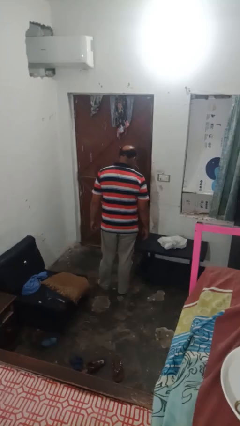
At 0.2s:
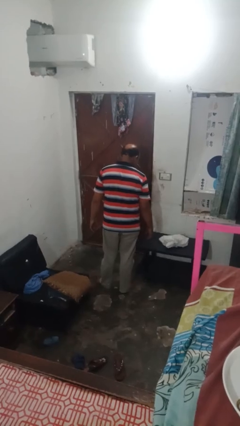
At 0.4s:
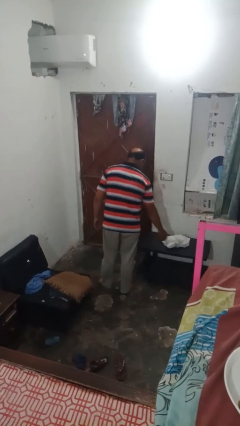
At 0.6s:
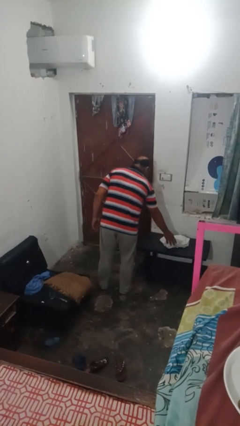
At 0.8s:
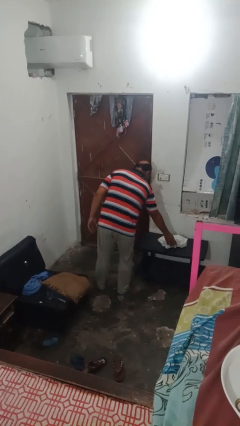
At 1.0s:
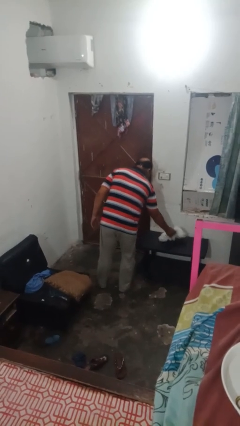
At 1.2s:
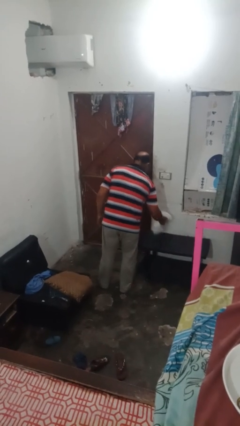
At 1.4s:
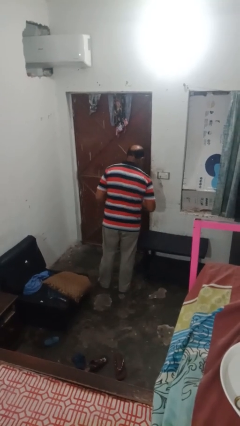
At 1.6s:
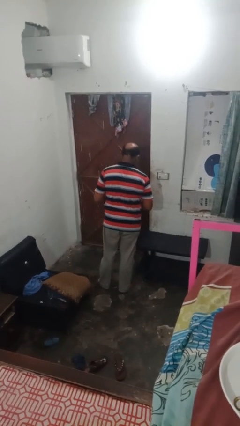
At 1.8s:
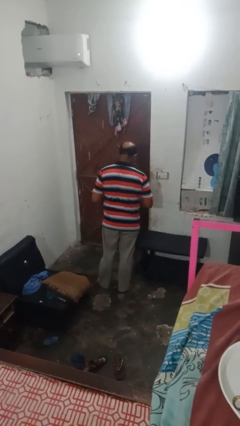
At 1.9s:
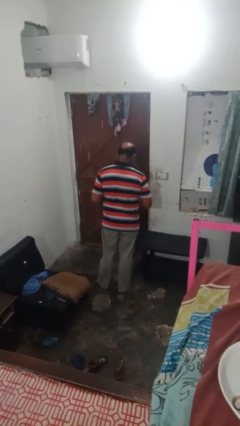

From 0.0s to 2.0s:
person picks up object from table

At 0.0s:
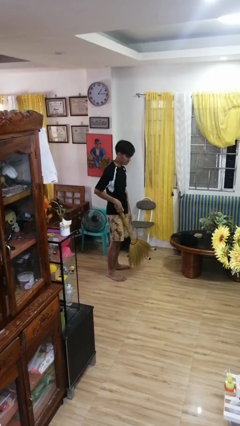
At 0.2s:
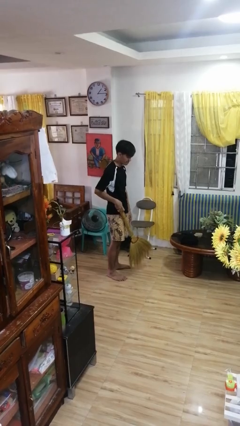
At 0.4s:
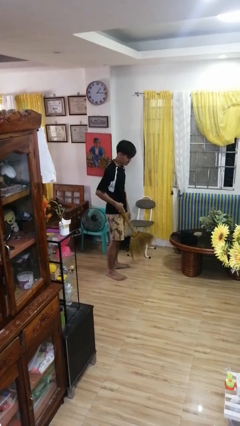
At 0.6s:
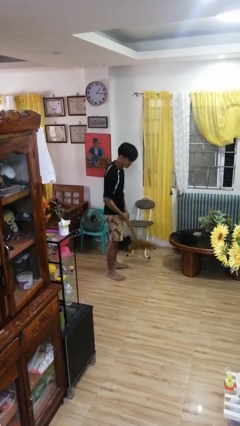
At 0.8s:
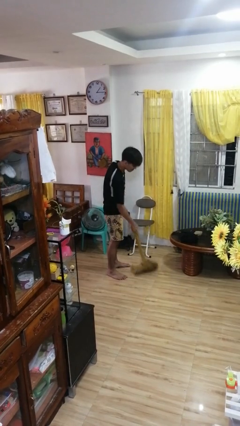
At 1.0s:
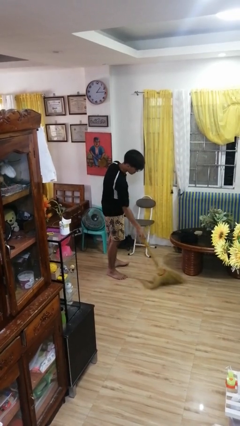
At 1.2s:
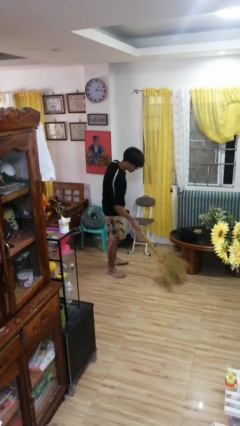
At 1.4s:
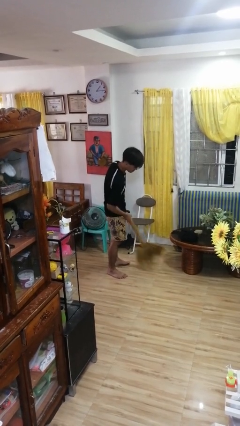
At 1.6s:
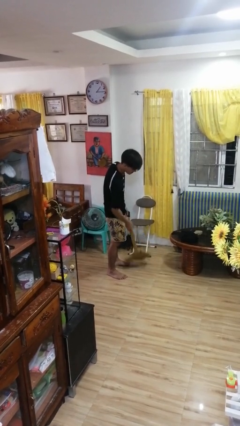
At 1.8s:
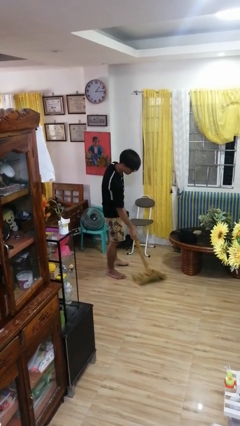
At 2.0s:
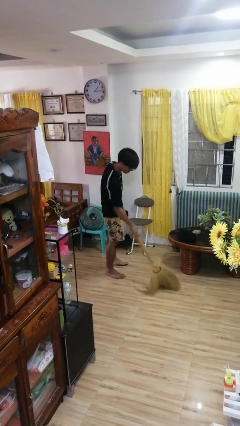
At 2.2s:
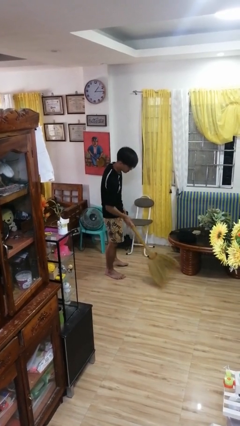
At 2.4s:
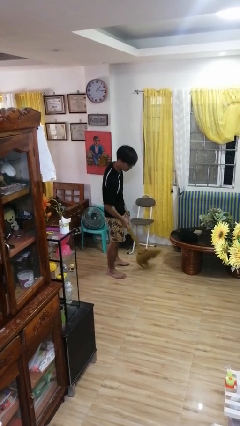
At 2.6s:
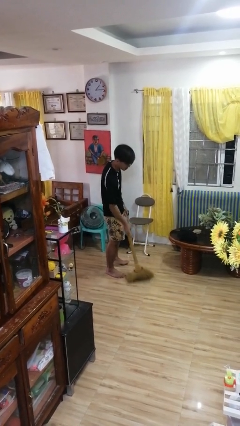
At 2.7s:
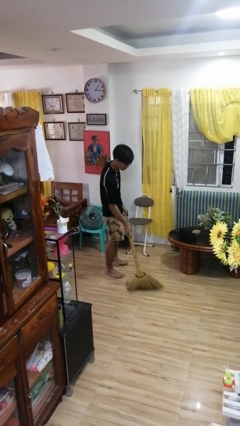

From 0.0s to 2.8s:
person sweeps floor

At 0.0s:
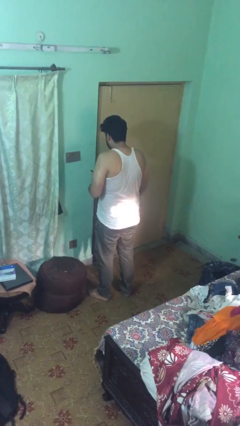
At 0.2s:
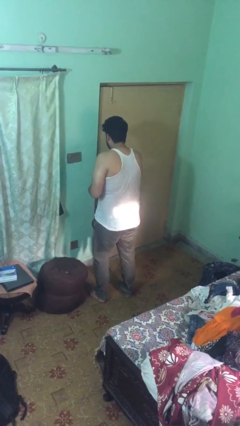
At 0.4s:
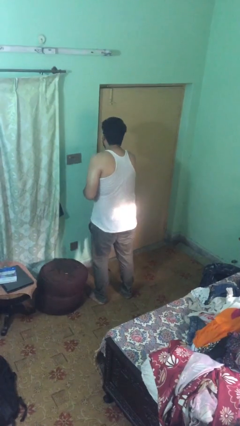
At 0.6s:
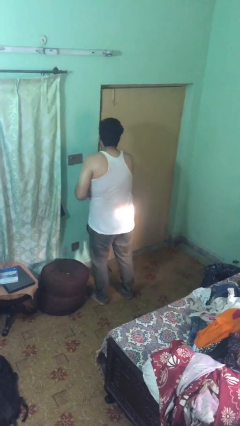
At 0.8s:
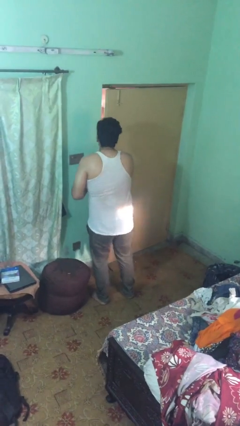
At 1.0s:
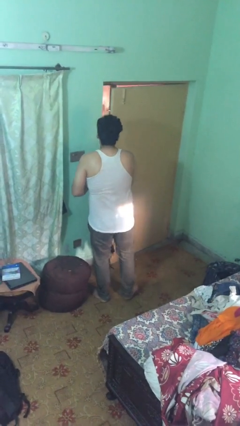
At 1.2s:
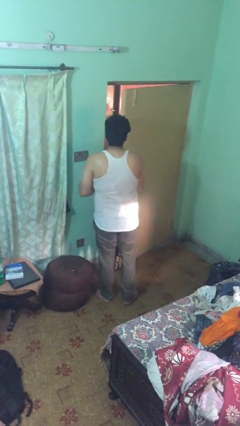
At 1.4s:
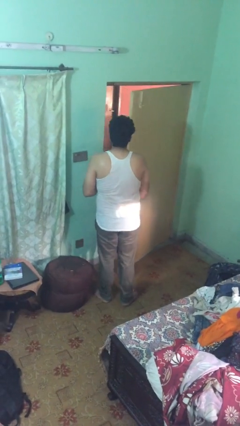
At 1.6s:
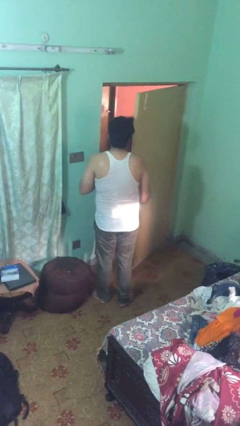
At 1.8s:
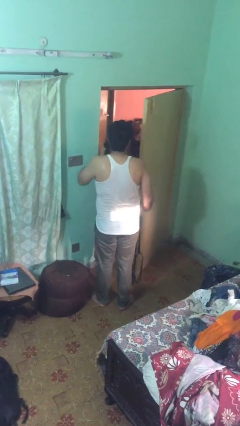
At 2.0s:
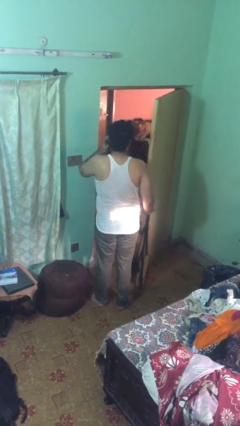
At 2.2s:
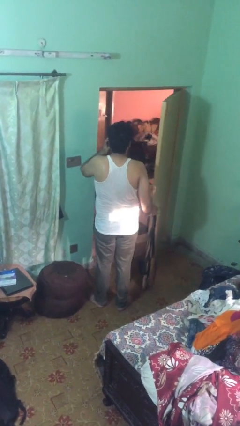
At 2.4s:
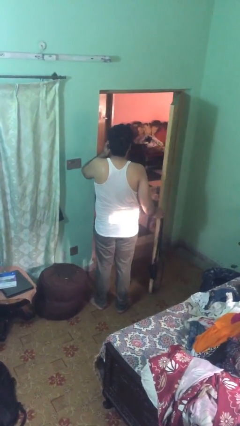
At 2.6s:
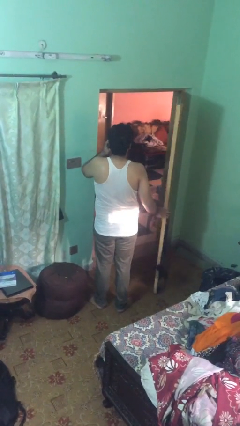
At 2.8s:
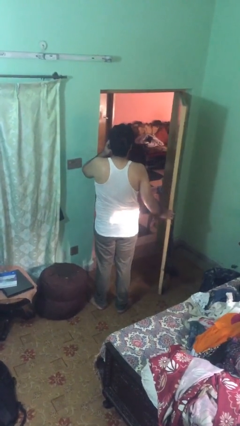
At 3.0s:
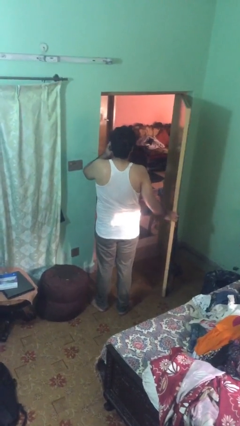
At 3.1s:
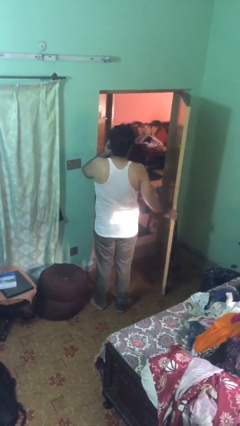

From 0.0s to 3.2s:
person opens facility door

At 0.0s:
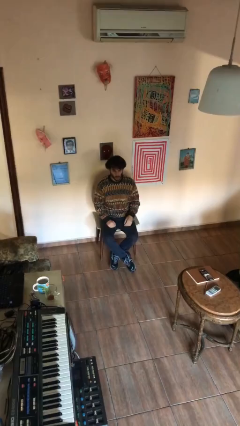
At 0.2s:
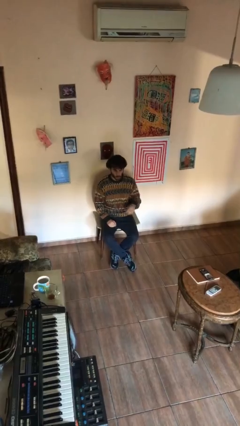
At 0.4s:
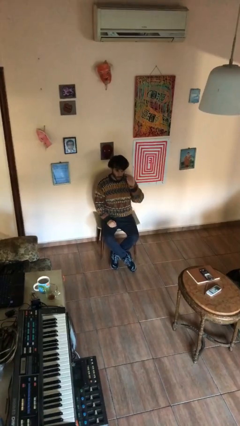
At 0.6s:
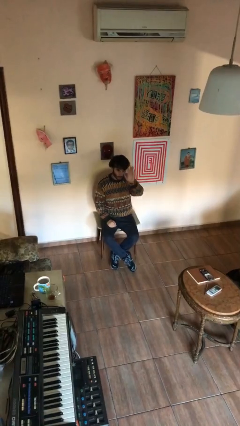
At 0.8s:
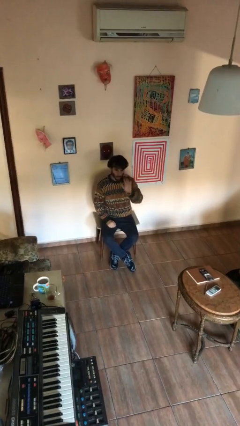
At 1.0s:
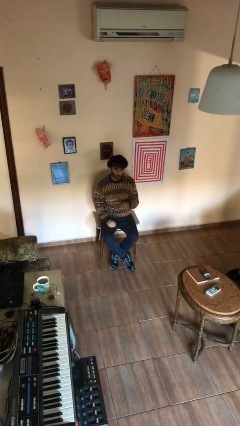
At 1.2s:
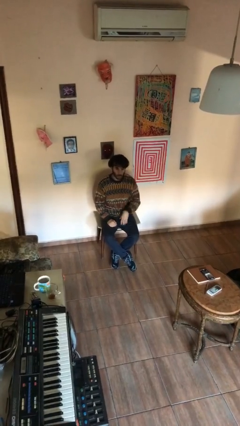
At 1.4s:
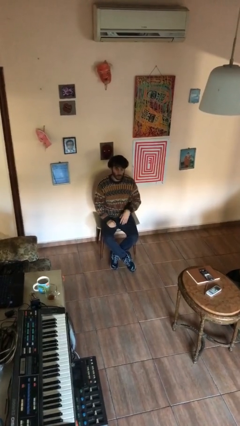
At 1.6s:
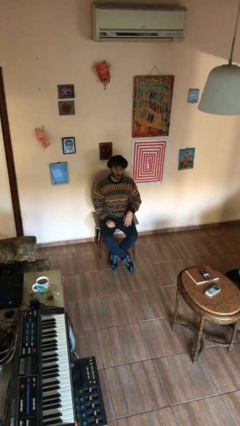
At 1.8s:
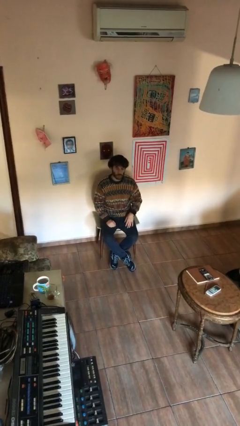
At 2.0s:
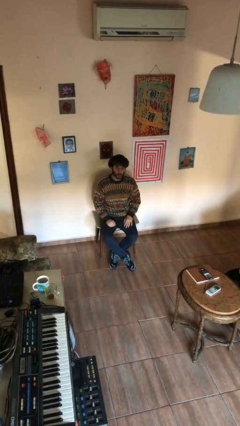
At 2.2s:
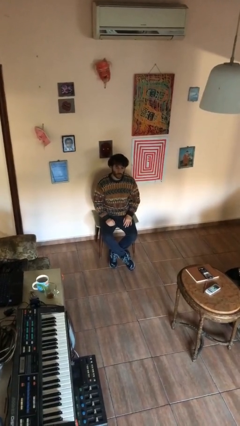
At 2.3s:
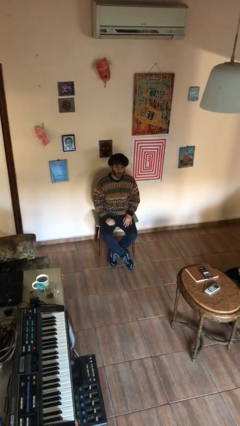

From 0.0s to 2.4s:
person gestures swipe down

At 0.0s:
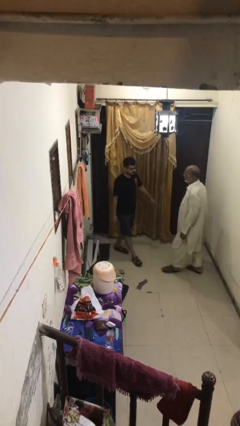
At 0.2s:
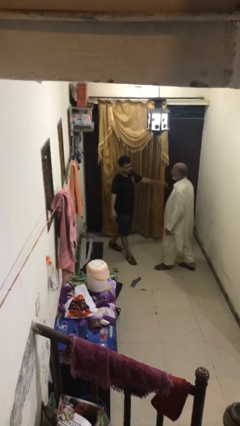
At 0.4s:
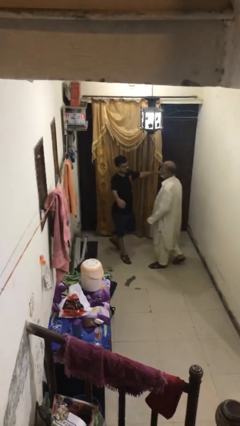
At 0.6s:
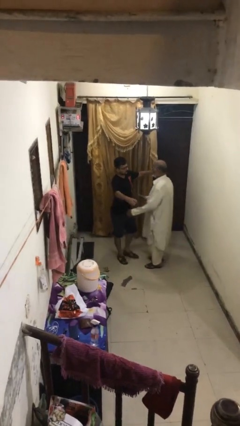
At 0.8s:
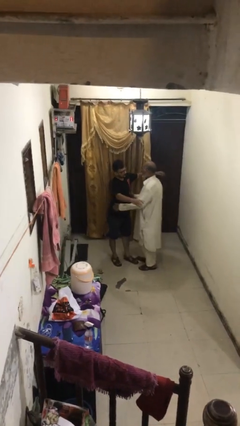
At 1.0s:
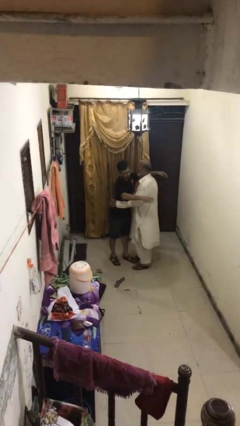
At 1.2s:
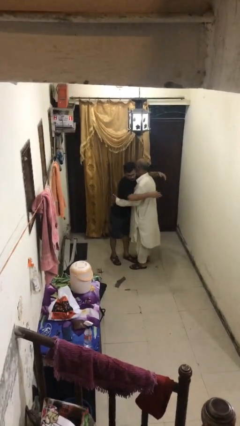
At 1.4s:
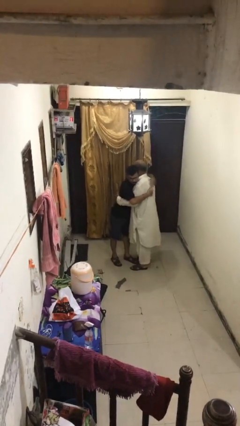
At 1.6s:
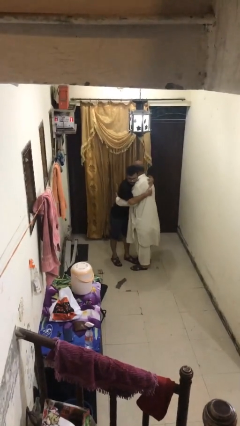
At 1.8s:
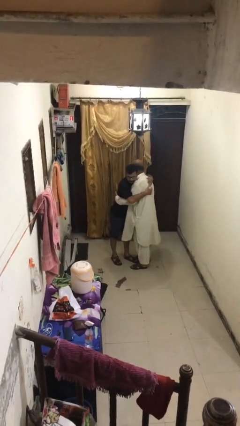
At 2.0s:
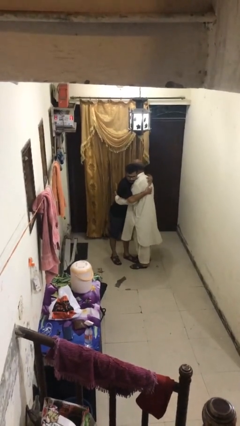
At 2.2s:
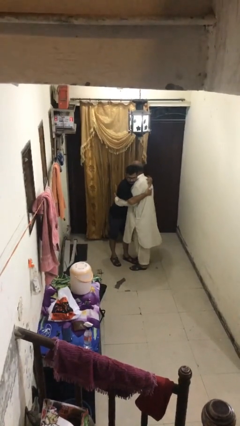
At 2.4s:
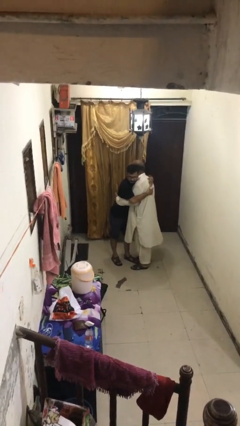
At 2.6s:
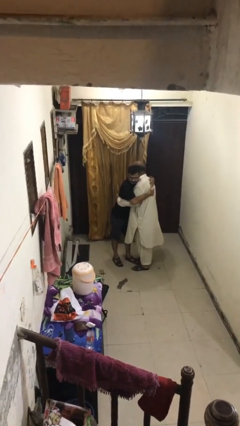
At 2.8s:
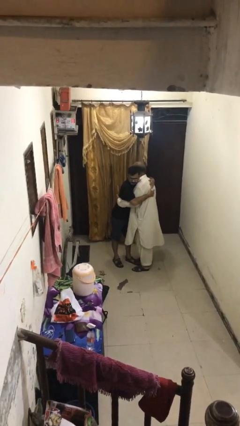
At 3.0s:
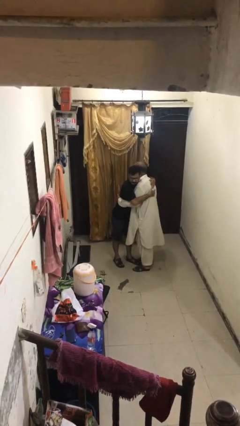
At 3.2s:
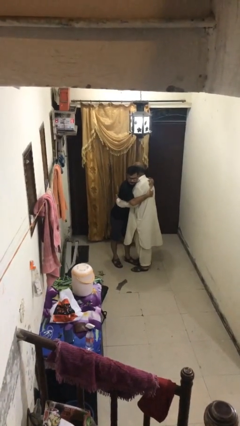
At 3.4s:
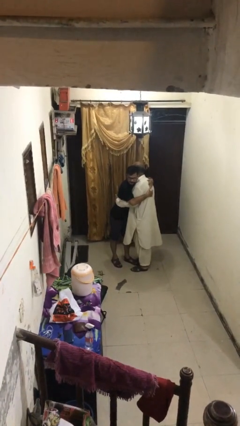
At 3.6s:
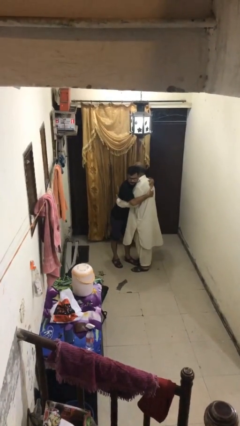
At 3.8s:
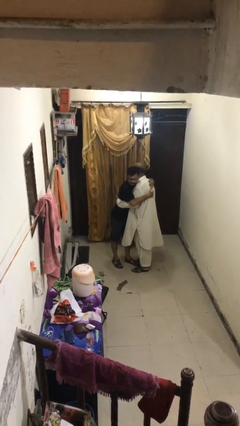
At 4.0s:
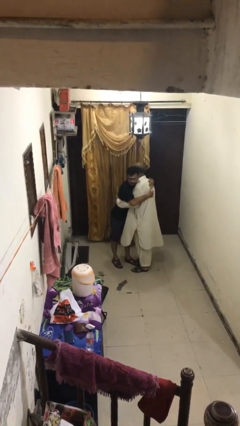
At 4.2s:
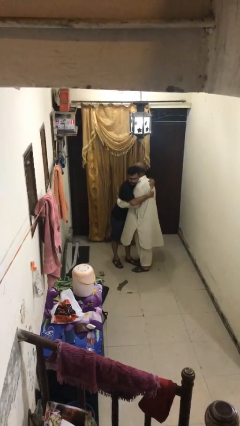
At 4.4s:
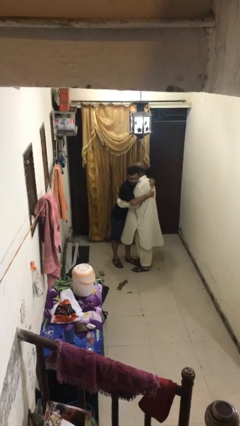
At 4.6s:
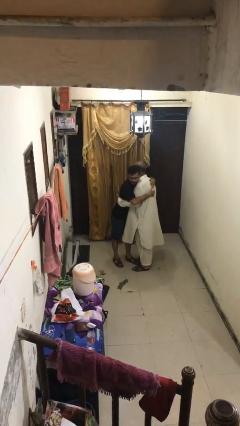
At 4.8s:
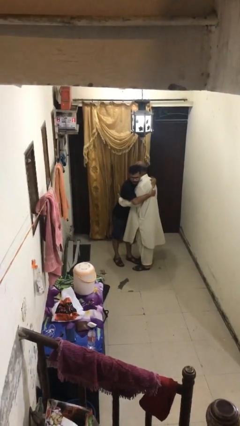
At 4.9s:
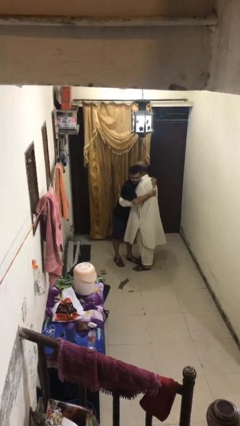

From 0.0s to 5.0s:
person embraces person

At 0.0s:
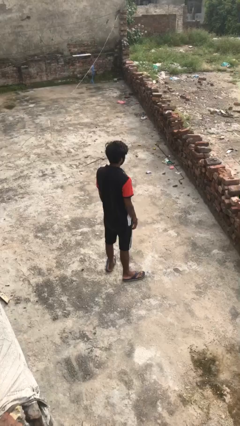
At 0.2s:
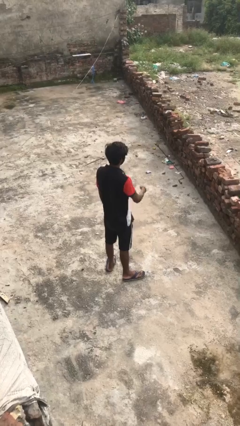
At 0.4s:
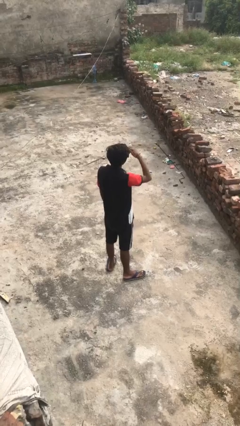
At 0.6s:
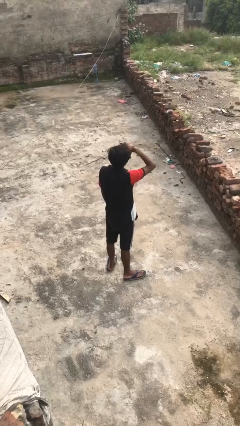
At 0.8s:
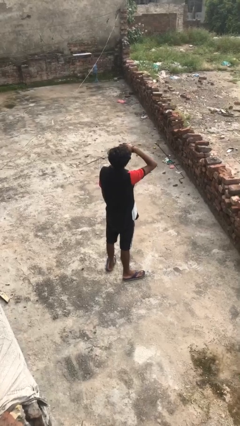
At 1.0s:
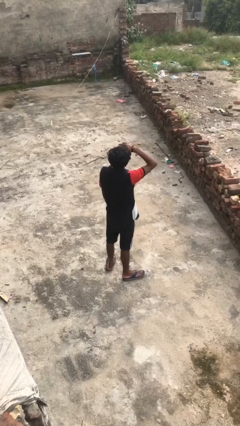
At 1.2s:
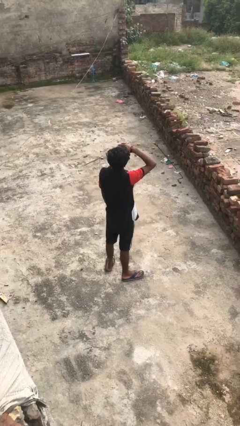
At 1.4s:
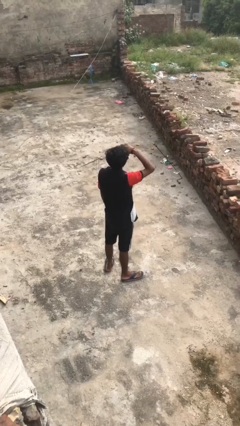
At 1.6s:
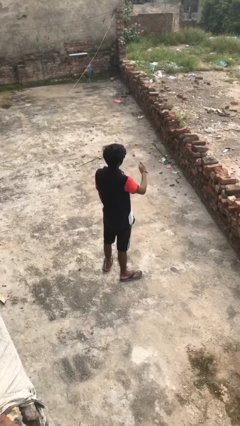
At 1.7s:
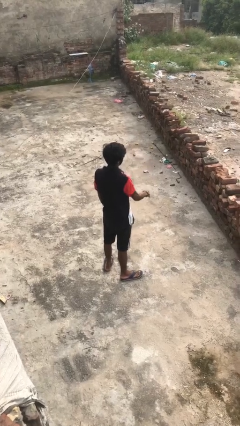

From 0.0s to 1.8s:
person shades eyes

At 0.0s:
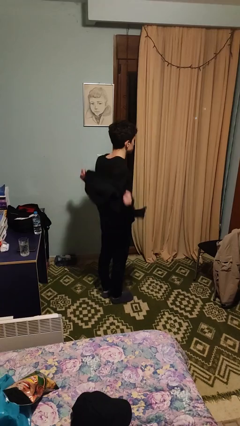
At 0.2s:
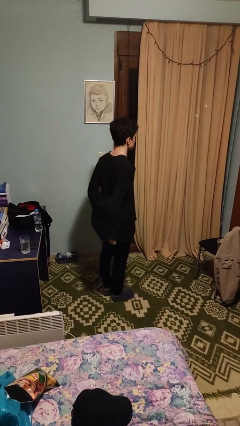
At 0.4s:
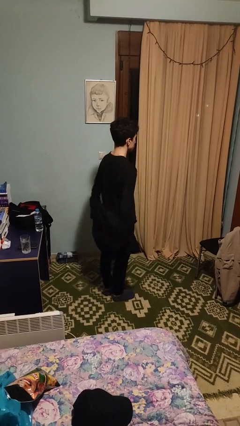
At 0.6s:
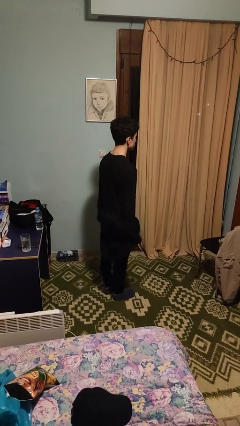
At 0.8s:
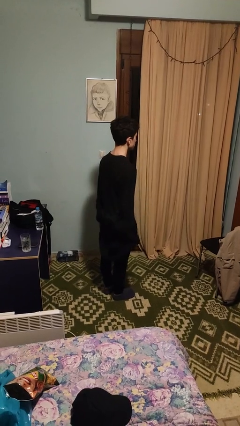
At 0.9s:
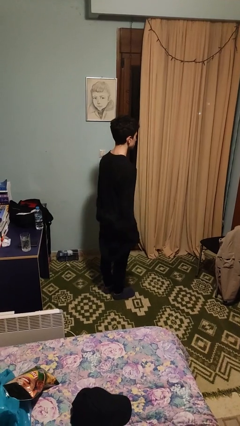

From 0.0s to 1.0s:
person takes off jacket
